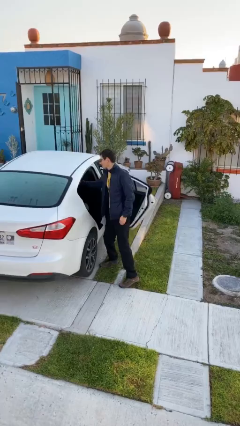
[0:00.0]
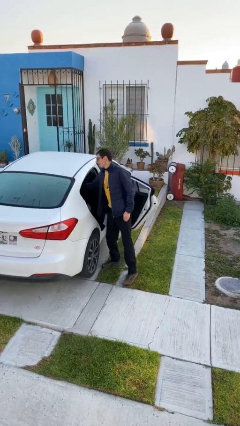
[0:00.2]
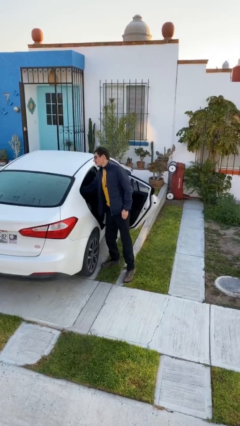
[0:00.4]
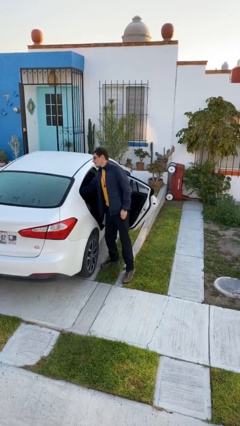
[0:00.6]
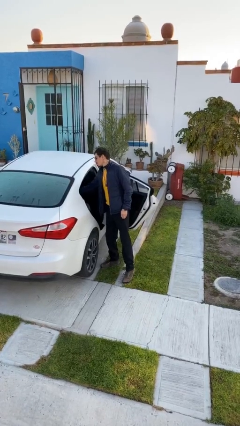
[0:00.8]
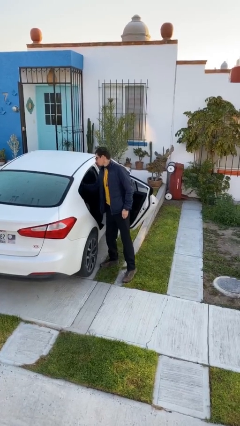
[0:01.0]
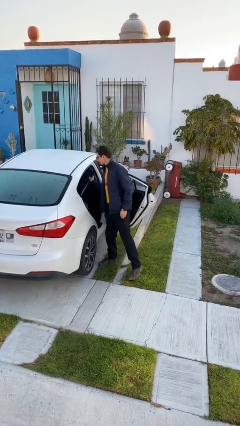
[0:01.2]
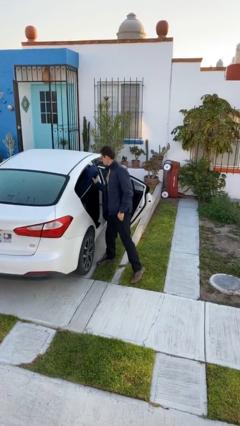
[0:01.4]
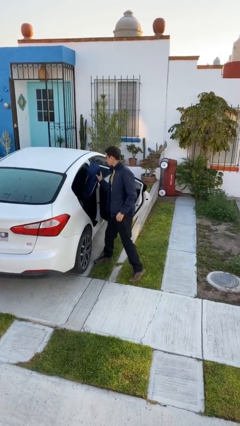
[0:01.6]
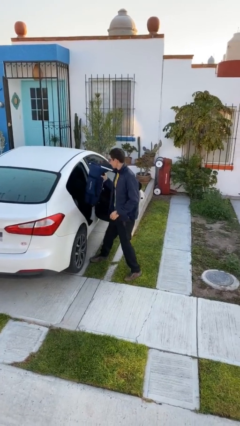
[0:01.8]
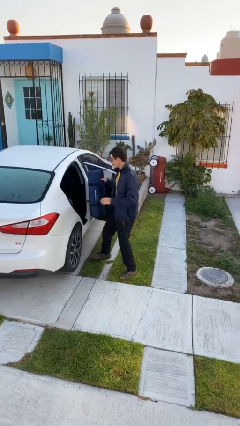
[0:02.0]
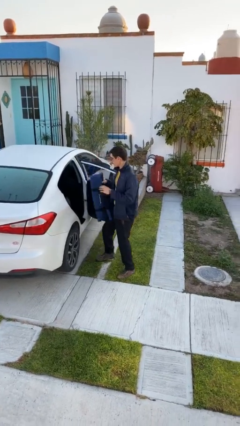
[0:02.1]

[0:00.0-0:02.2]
person unloads car

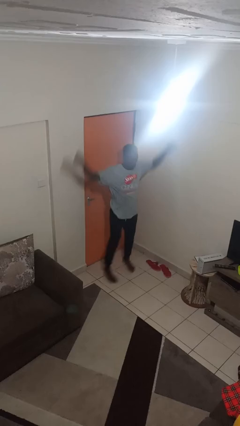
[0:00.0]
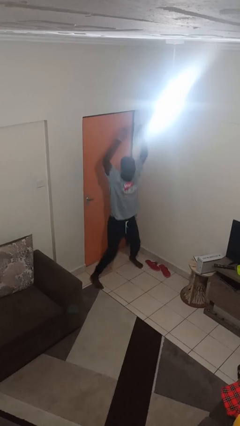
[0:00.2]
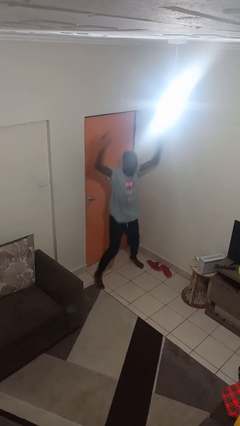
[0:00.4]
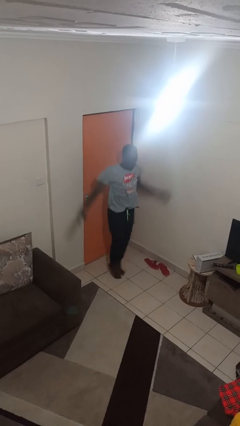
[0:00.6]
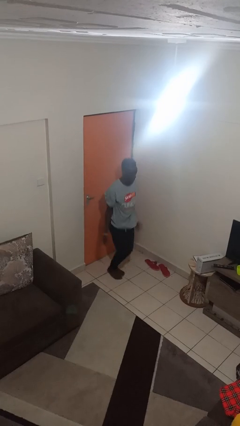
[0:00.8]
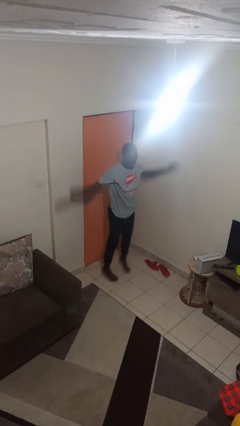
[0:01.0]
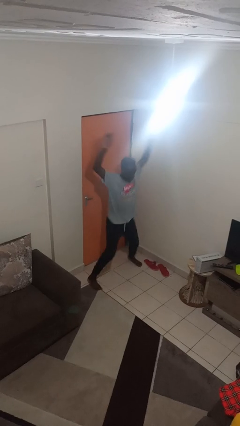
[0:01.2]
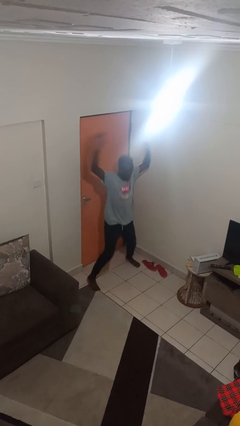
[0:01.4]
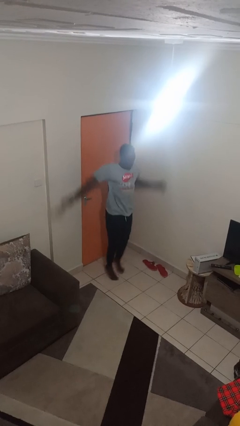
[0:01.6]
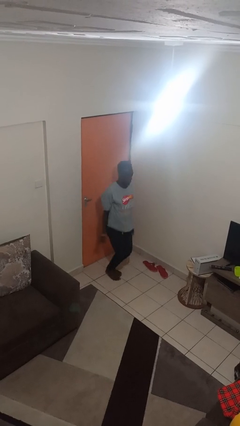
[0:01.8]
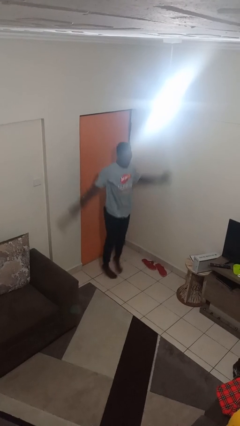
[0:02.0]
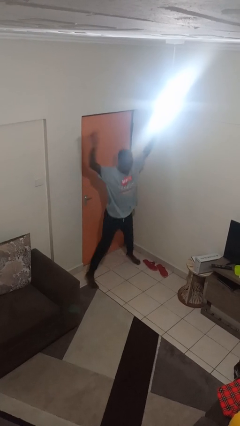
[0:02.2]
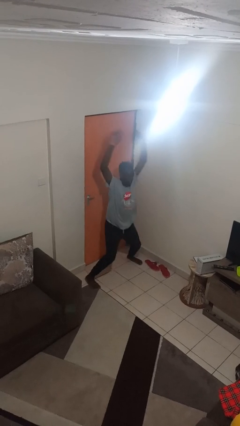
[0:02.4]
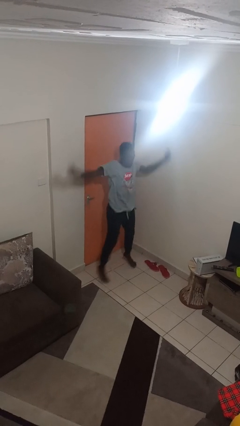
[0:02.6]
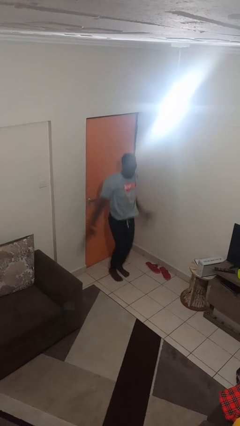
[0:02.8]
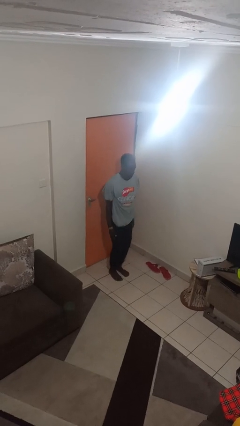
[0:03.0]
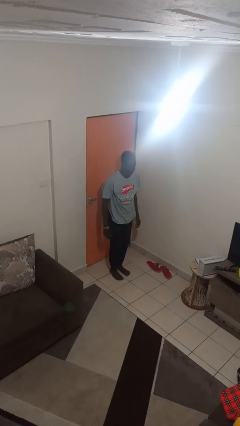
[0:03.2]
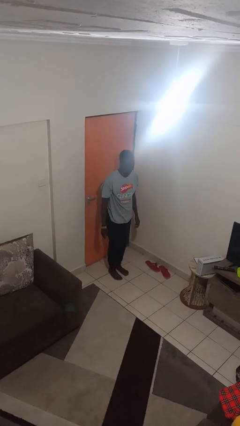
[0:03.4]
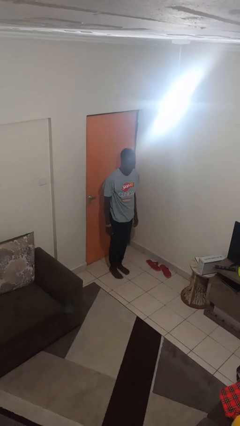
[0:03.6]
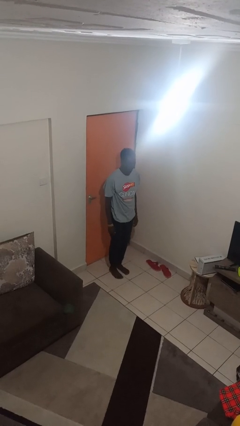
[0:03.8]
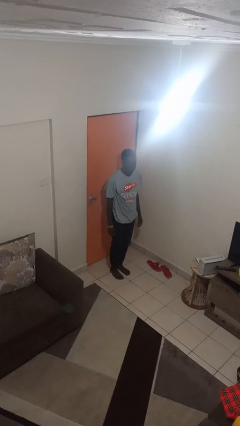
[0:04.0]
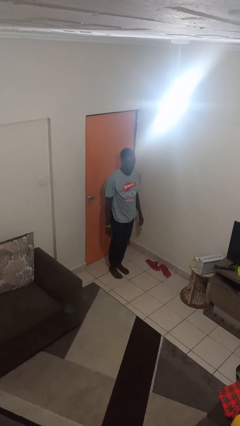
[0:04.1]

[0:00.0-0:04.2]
person exercises with jumping jacks

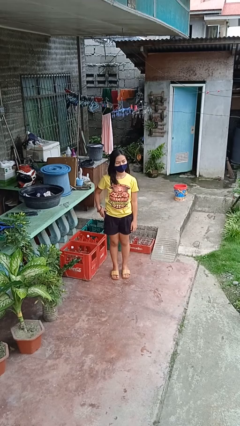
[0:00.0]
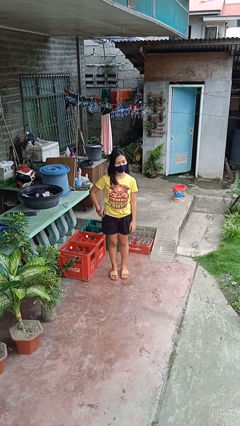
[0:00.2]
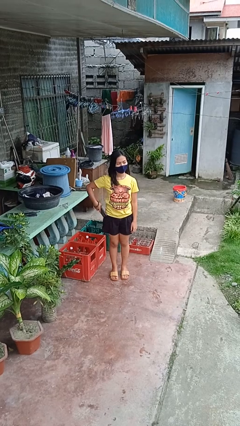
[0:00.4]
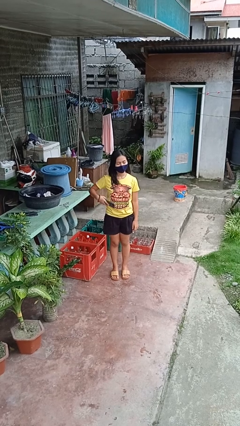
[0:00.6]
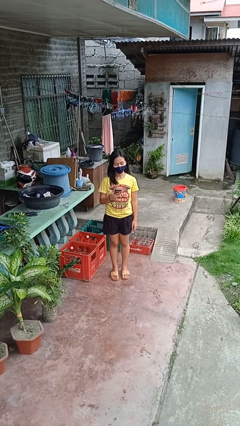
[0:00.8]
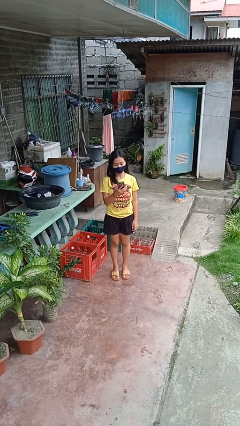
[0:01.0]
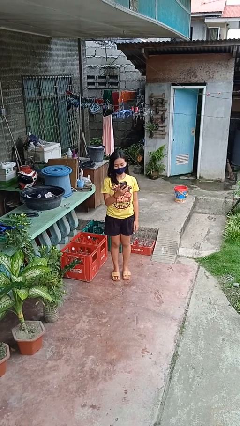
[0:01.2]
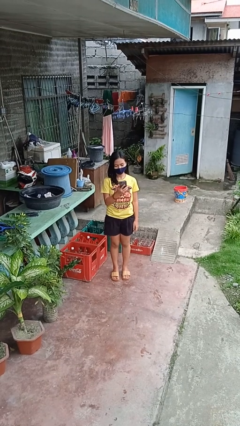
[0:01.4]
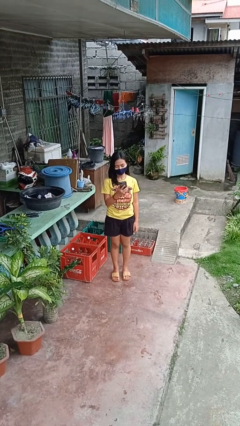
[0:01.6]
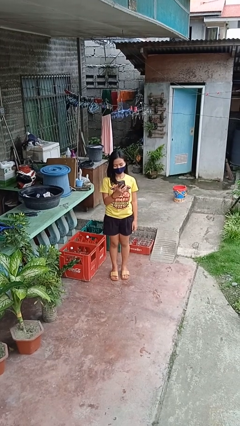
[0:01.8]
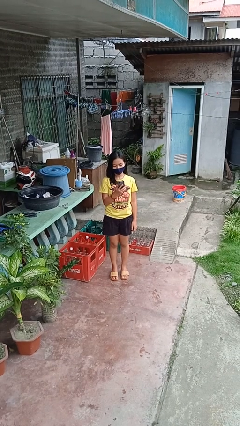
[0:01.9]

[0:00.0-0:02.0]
person takes phone from pocket

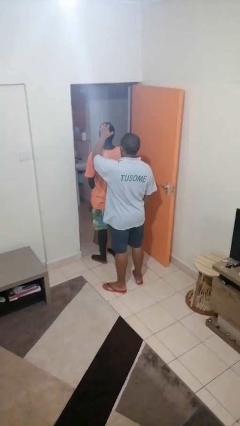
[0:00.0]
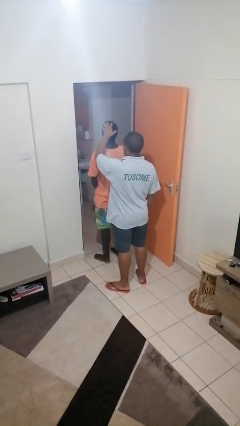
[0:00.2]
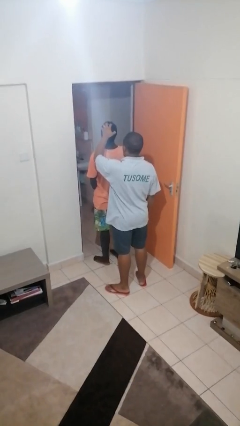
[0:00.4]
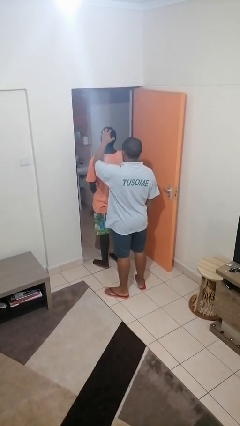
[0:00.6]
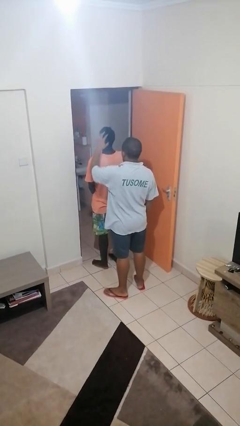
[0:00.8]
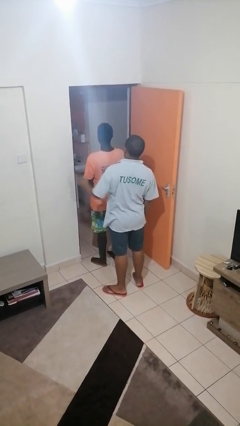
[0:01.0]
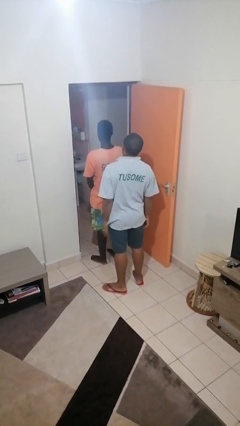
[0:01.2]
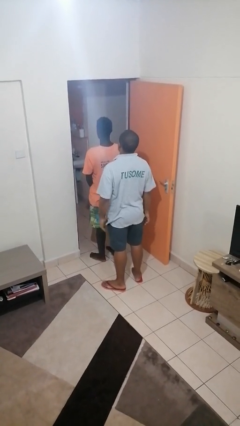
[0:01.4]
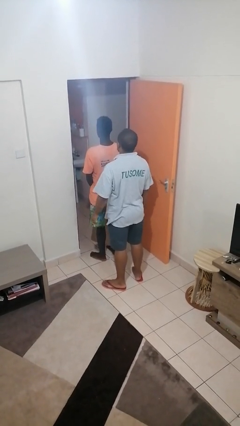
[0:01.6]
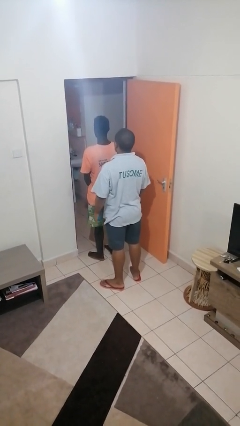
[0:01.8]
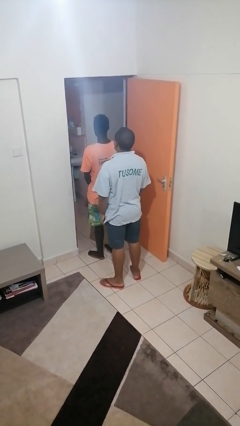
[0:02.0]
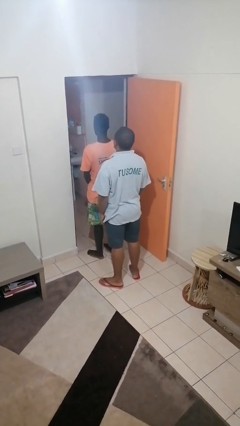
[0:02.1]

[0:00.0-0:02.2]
person grabs person by hair

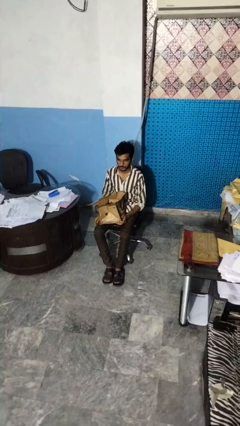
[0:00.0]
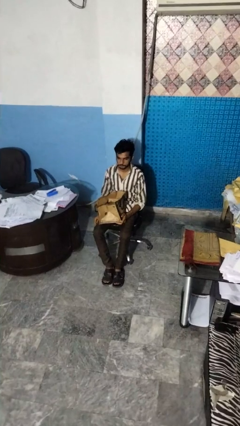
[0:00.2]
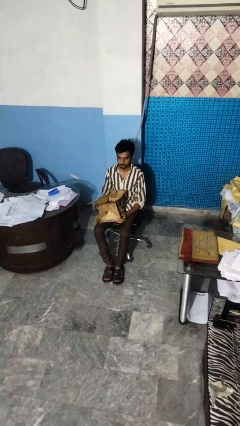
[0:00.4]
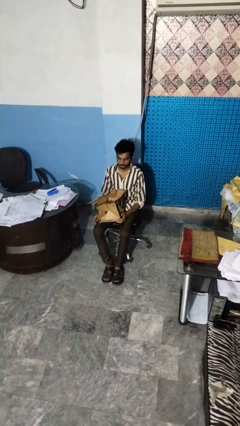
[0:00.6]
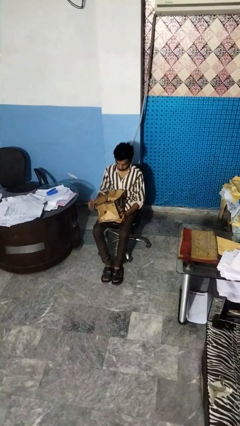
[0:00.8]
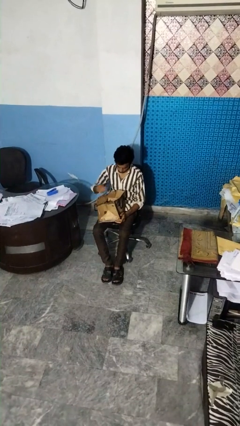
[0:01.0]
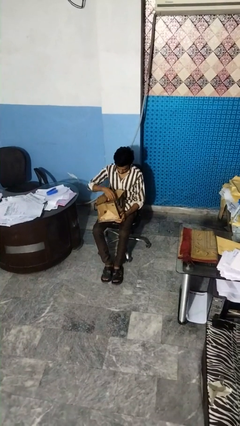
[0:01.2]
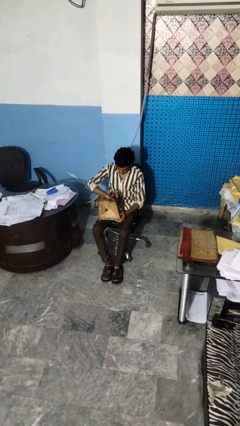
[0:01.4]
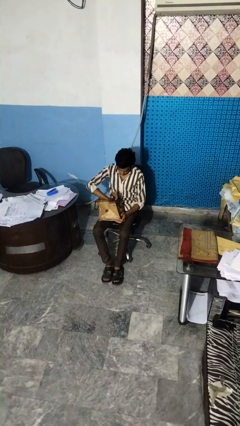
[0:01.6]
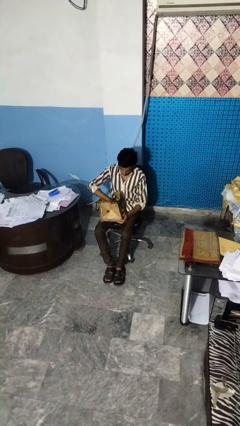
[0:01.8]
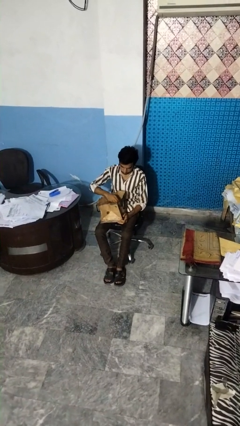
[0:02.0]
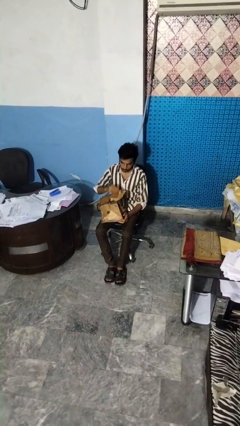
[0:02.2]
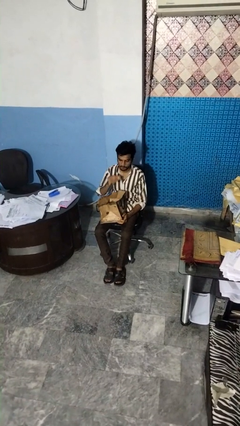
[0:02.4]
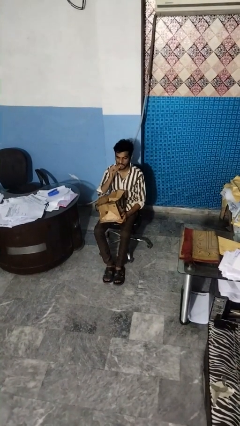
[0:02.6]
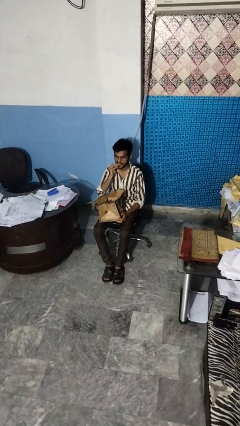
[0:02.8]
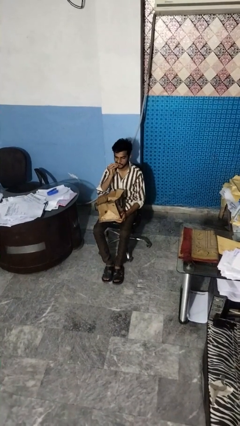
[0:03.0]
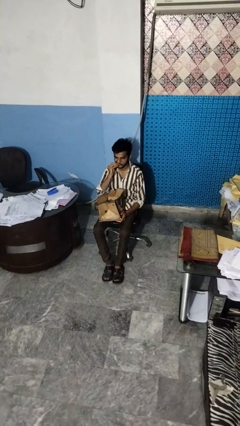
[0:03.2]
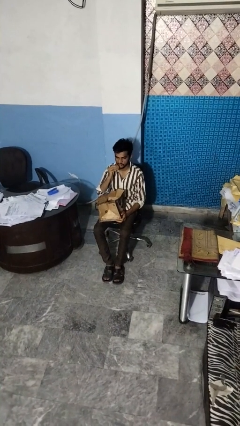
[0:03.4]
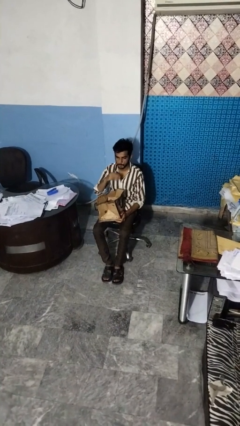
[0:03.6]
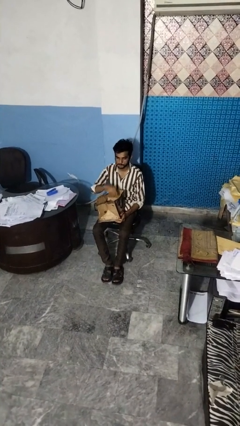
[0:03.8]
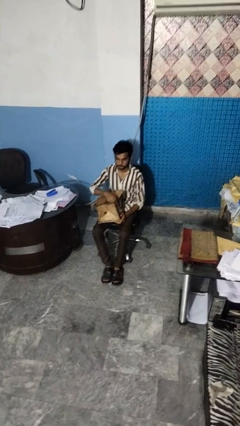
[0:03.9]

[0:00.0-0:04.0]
person eats snack from bag

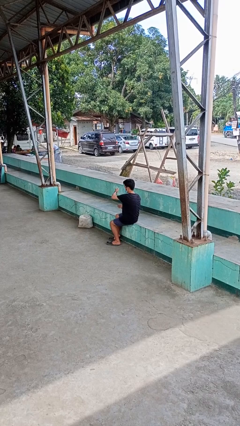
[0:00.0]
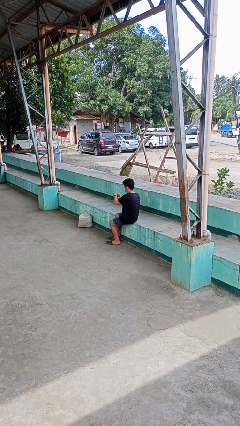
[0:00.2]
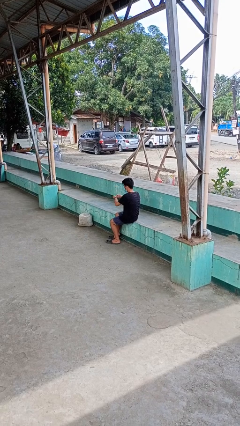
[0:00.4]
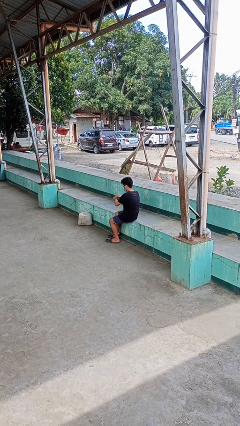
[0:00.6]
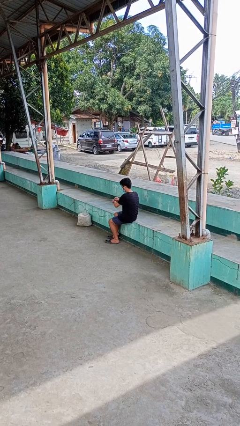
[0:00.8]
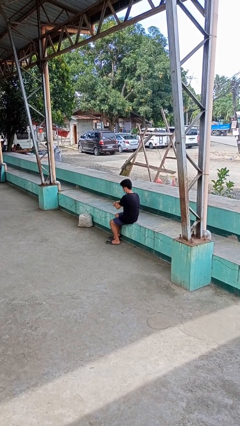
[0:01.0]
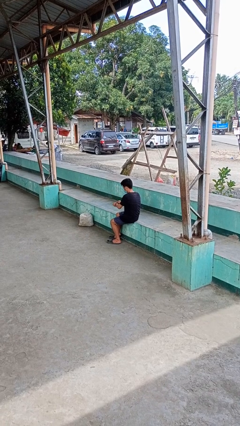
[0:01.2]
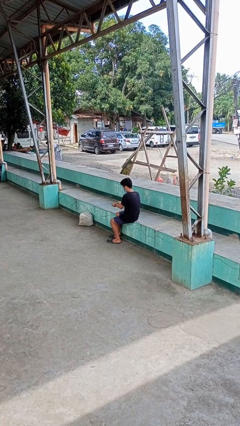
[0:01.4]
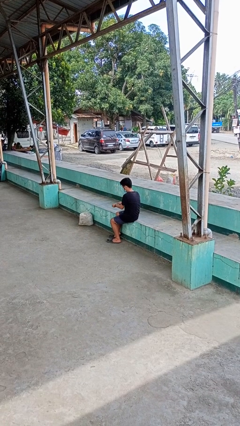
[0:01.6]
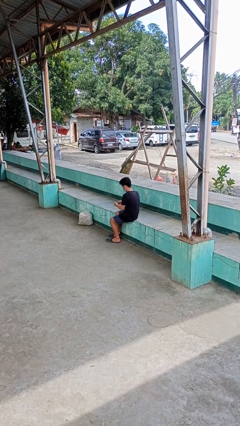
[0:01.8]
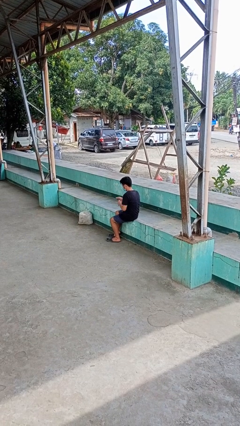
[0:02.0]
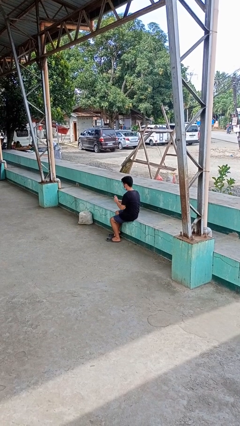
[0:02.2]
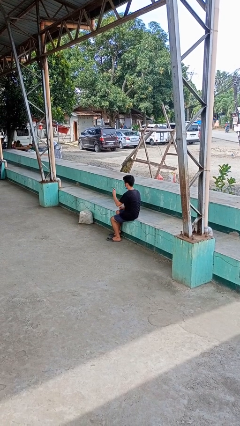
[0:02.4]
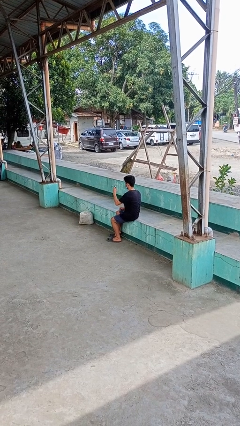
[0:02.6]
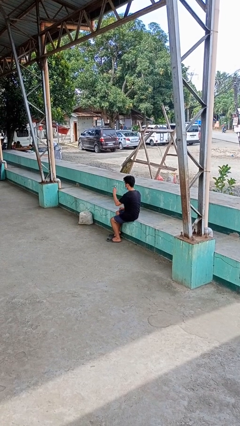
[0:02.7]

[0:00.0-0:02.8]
person takes off wristwatch
